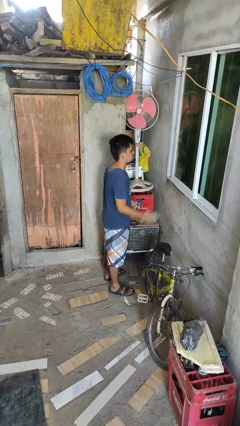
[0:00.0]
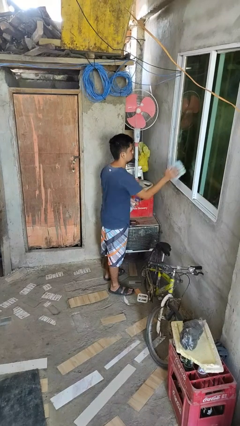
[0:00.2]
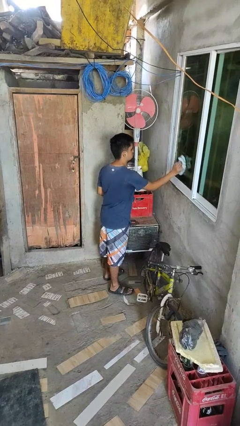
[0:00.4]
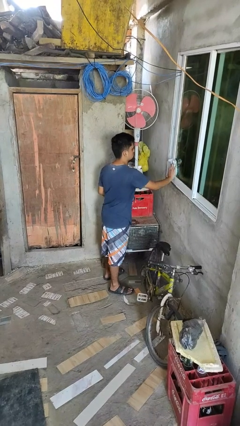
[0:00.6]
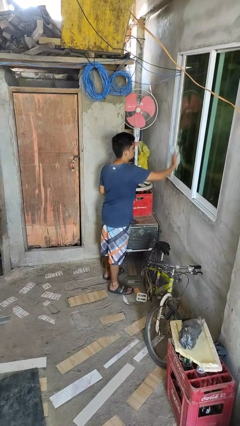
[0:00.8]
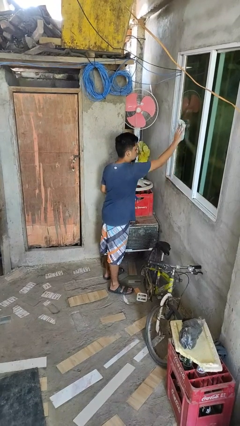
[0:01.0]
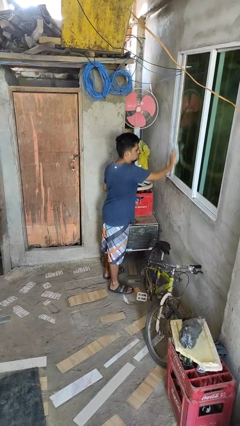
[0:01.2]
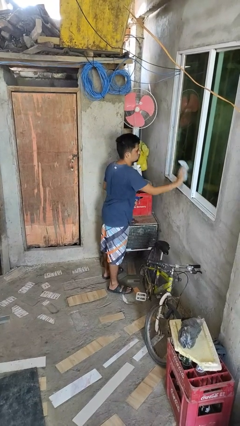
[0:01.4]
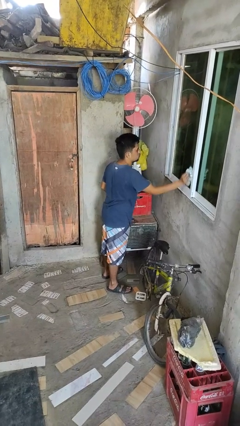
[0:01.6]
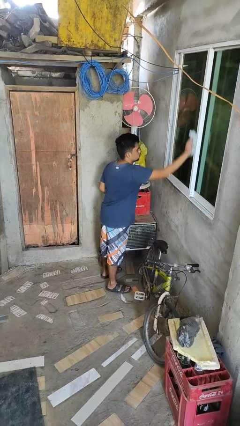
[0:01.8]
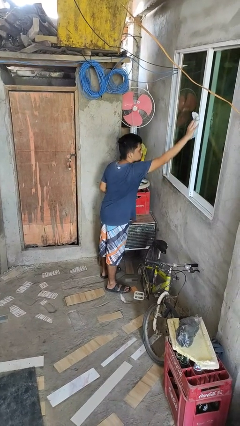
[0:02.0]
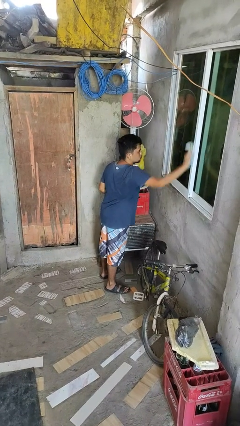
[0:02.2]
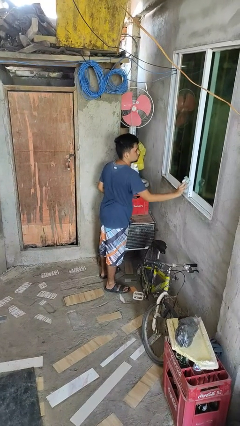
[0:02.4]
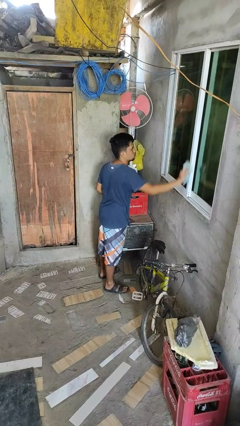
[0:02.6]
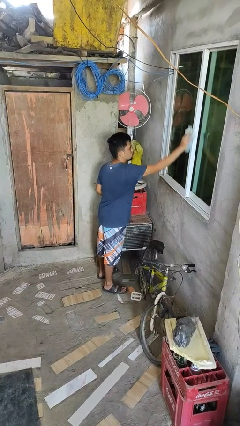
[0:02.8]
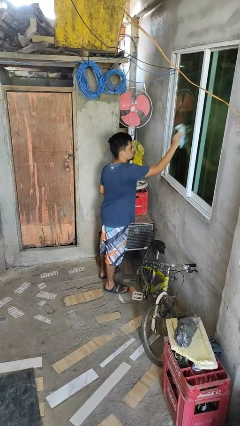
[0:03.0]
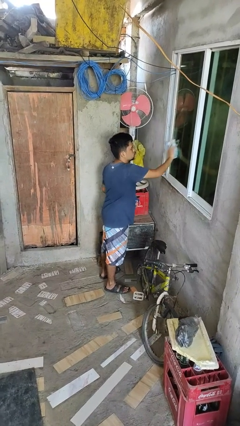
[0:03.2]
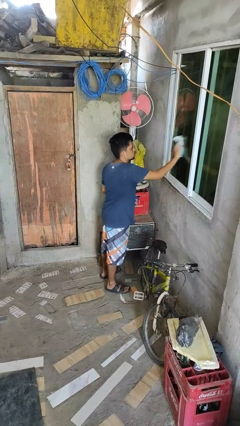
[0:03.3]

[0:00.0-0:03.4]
person washes window

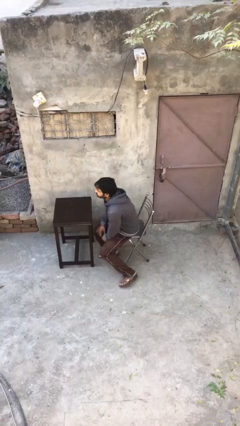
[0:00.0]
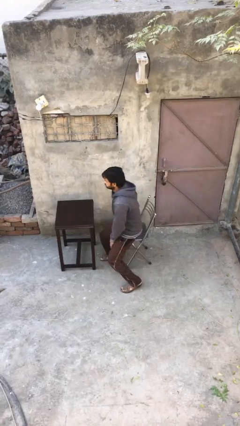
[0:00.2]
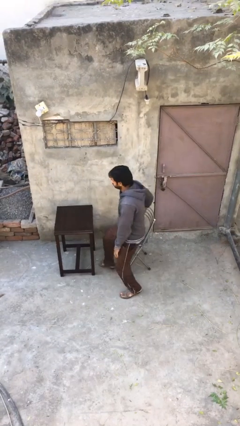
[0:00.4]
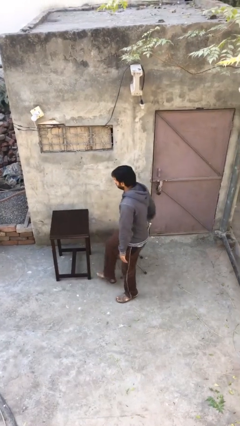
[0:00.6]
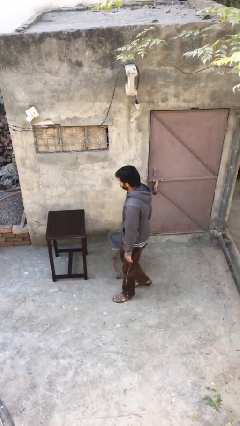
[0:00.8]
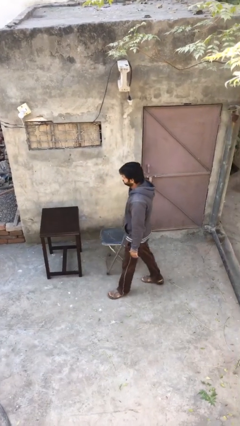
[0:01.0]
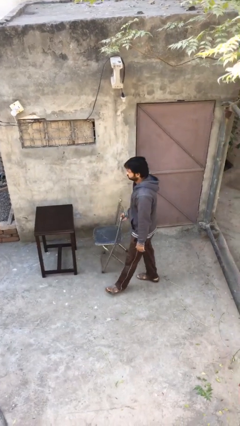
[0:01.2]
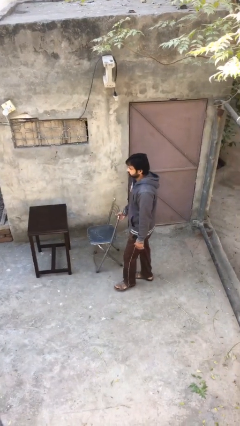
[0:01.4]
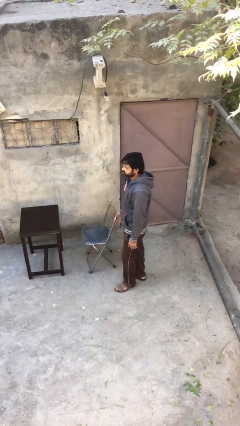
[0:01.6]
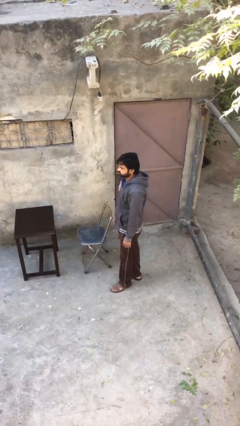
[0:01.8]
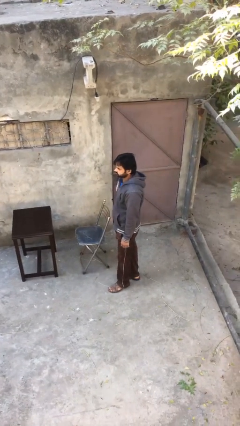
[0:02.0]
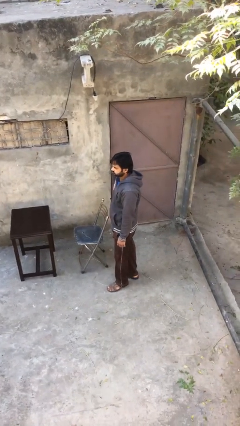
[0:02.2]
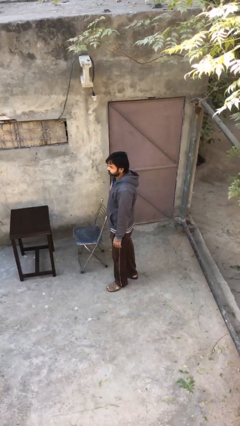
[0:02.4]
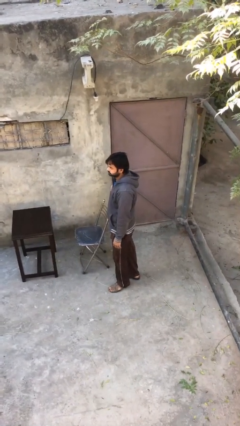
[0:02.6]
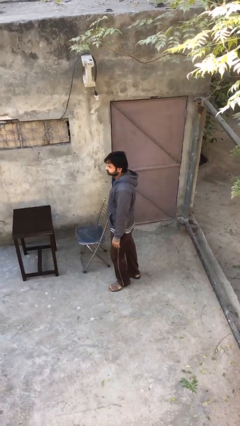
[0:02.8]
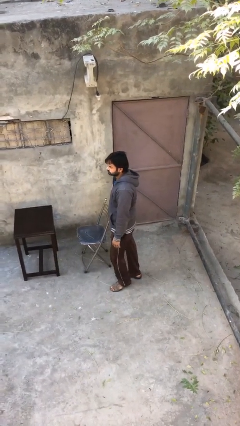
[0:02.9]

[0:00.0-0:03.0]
person stands up

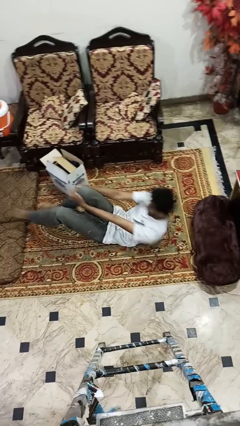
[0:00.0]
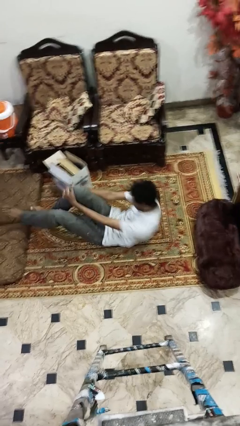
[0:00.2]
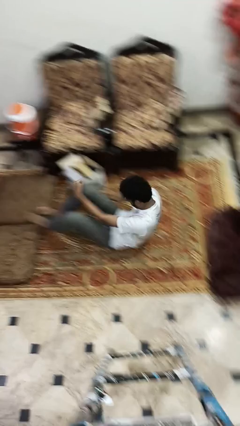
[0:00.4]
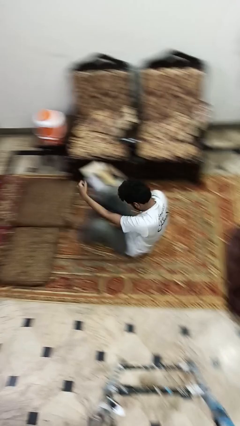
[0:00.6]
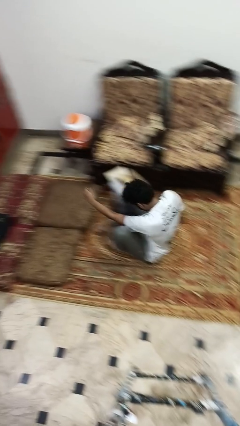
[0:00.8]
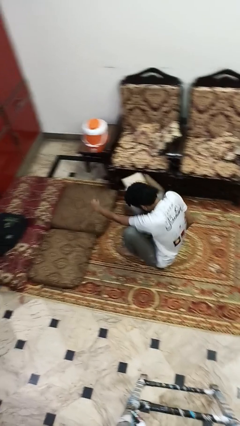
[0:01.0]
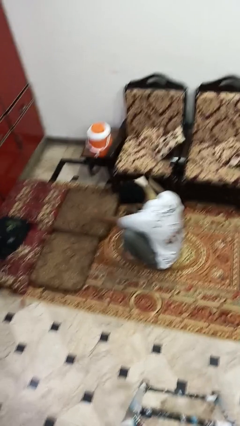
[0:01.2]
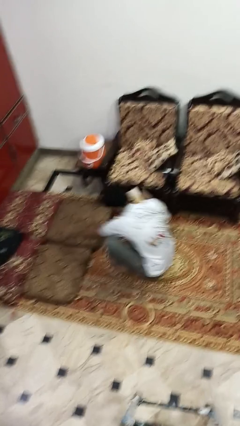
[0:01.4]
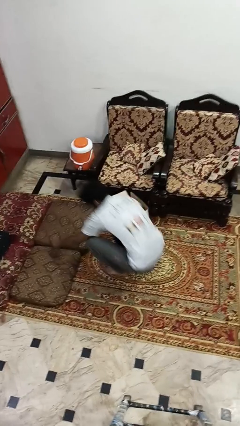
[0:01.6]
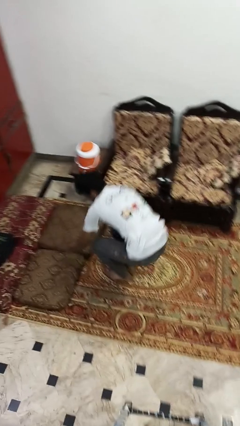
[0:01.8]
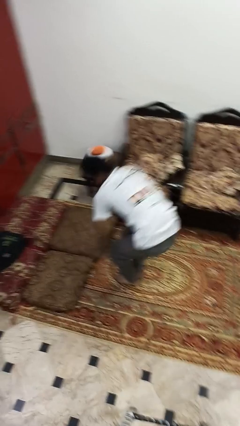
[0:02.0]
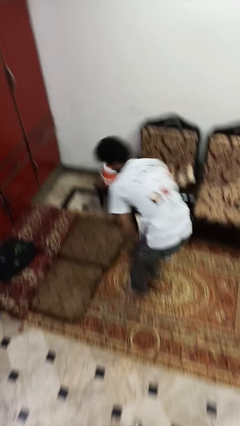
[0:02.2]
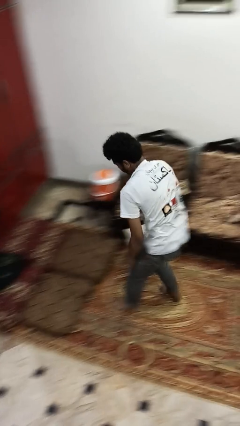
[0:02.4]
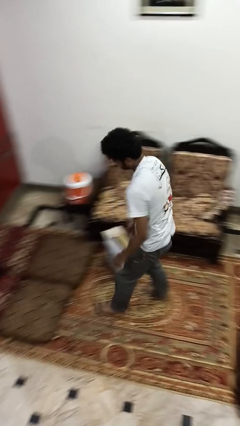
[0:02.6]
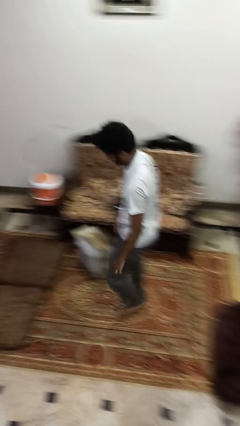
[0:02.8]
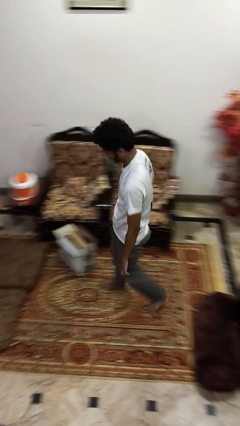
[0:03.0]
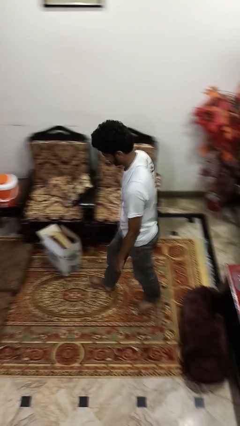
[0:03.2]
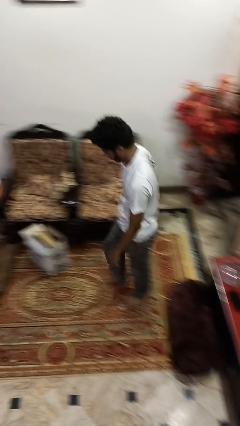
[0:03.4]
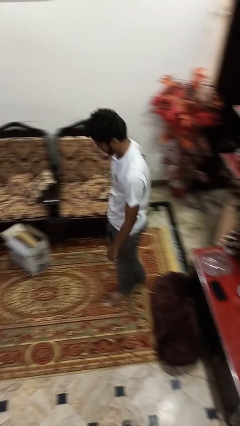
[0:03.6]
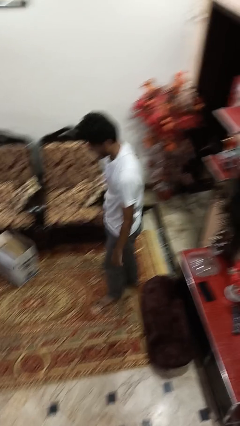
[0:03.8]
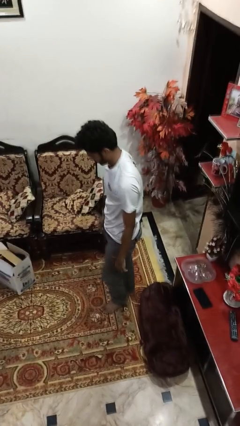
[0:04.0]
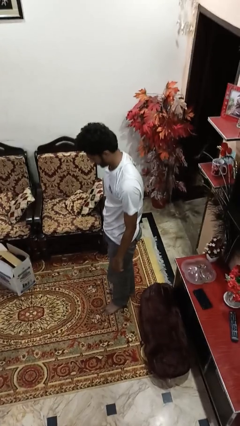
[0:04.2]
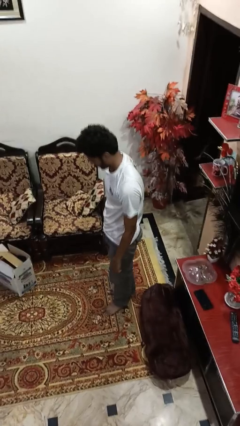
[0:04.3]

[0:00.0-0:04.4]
person stands up from floor

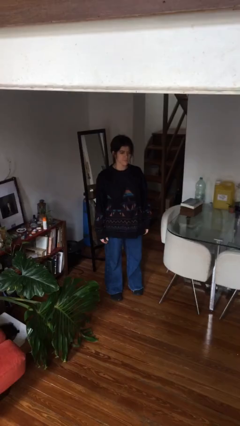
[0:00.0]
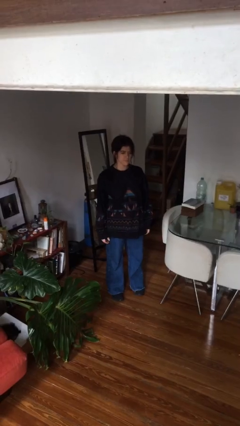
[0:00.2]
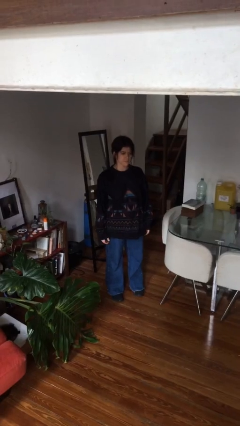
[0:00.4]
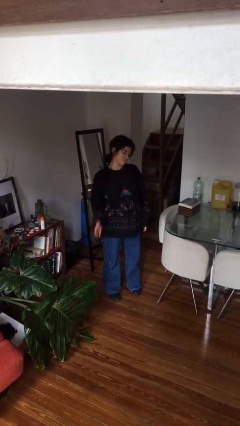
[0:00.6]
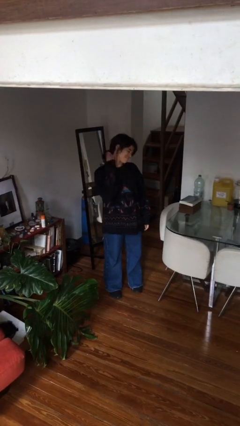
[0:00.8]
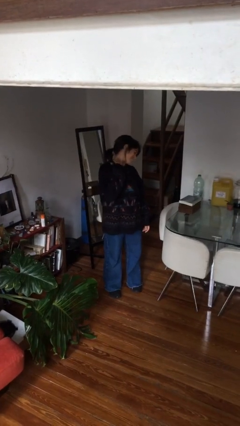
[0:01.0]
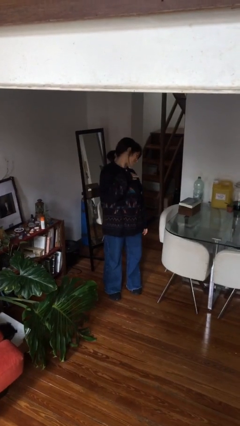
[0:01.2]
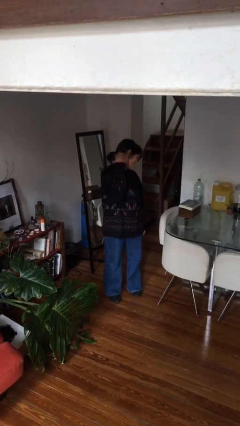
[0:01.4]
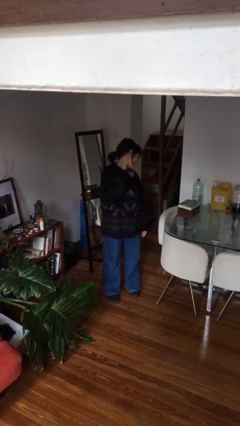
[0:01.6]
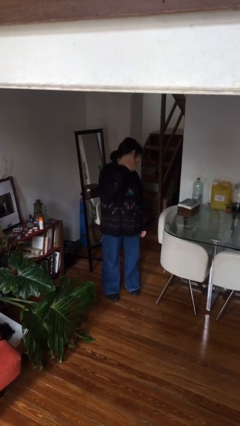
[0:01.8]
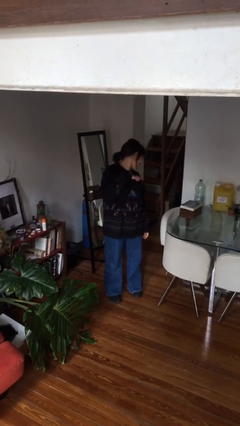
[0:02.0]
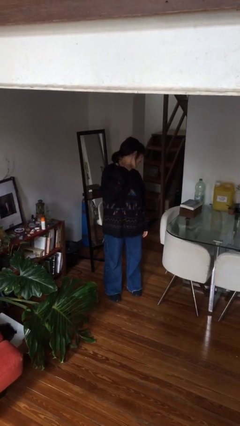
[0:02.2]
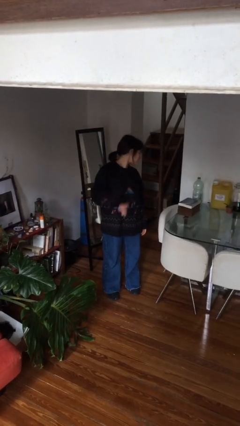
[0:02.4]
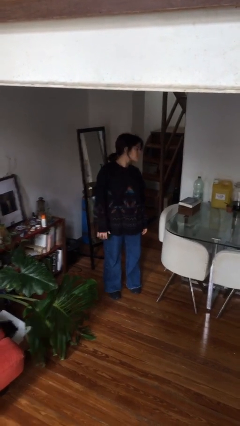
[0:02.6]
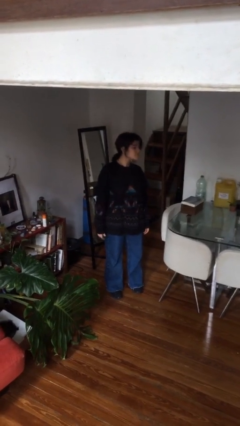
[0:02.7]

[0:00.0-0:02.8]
person swats bug

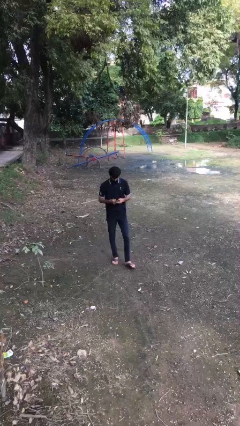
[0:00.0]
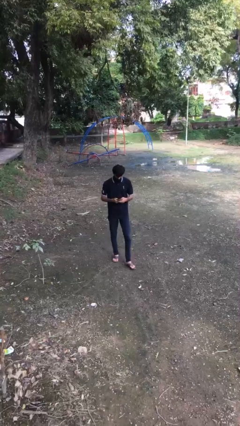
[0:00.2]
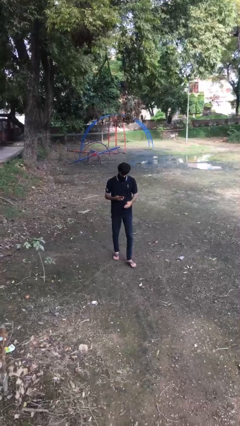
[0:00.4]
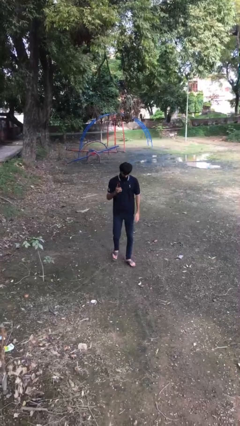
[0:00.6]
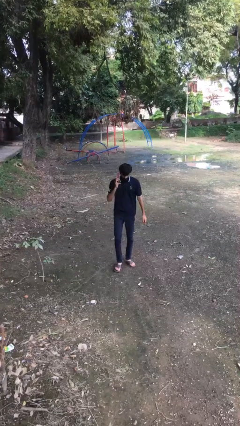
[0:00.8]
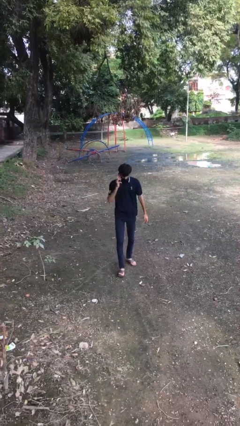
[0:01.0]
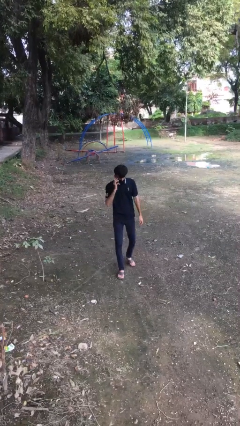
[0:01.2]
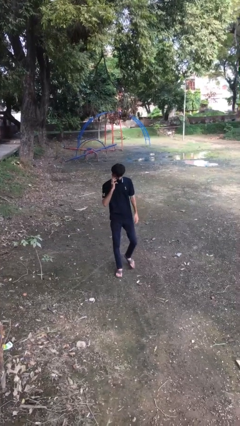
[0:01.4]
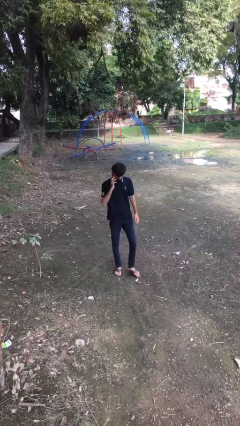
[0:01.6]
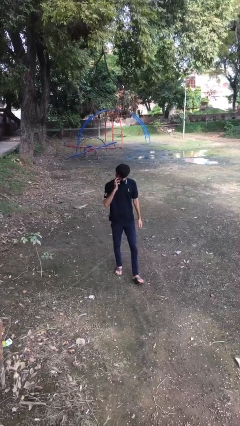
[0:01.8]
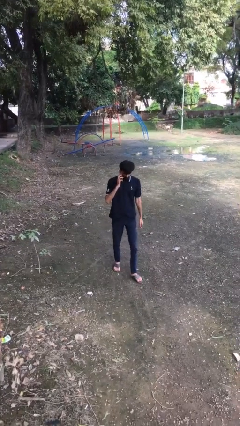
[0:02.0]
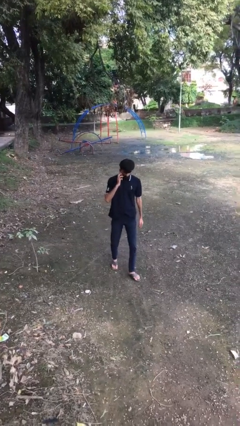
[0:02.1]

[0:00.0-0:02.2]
person talks on phone

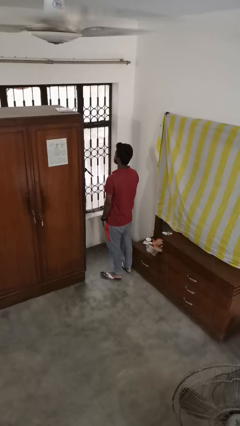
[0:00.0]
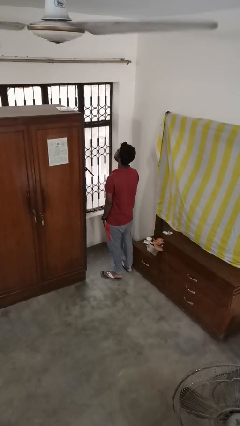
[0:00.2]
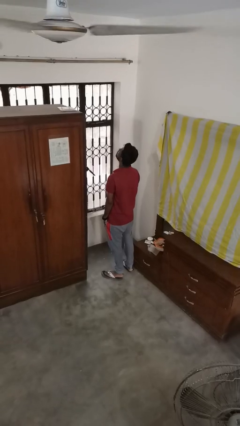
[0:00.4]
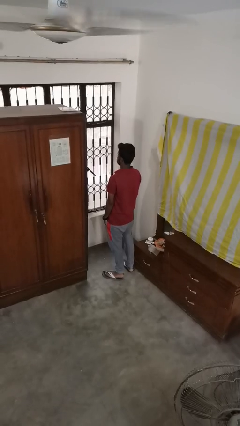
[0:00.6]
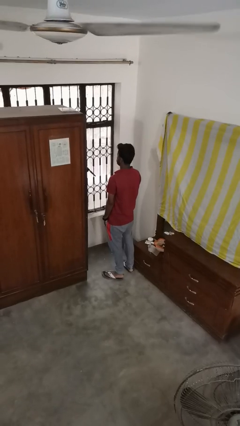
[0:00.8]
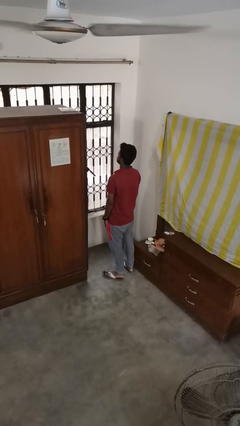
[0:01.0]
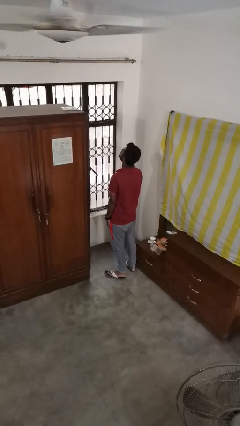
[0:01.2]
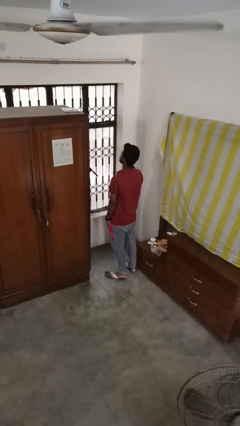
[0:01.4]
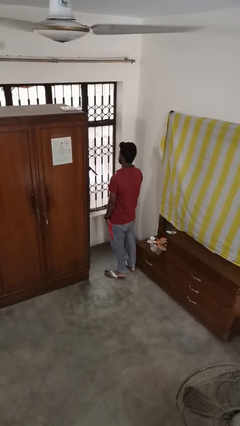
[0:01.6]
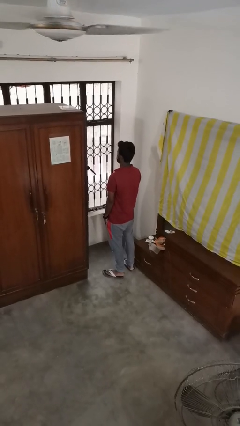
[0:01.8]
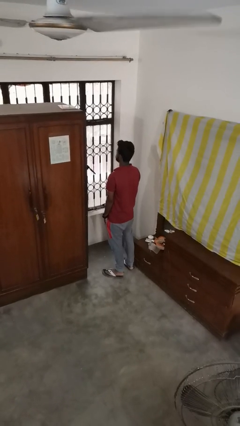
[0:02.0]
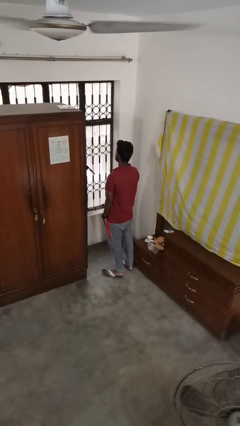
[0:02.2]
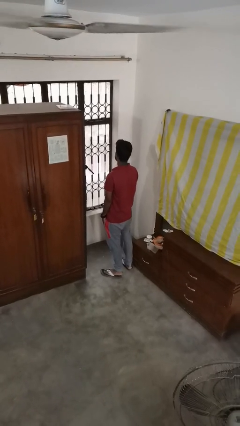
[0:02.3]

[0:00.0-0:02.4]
person nods head
